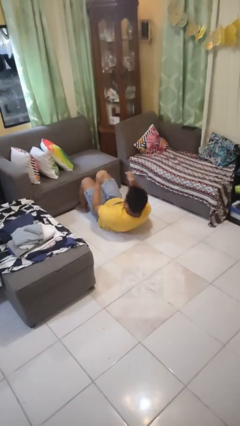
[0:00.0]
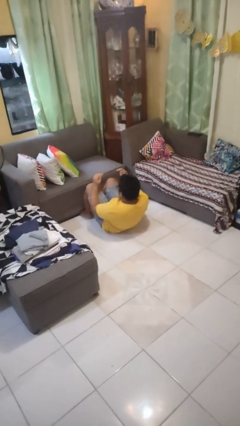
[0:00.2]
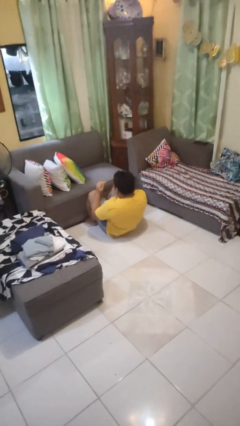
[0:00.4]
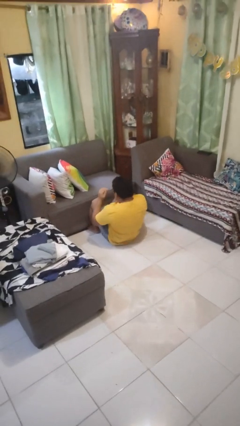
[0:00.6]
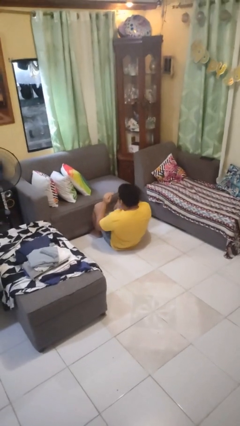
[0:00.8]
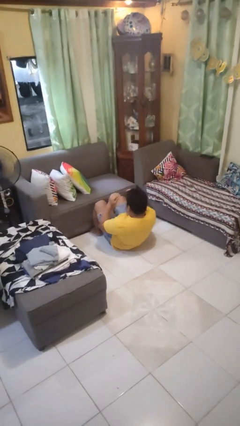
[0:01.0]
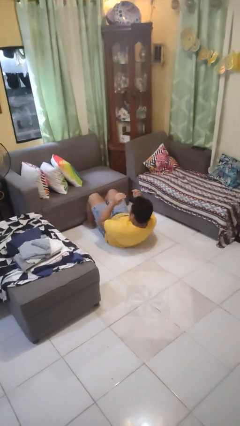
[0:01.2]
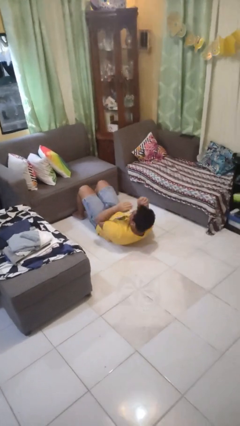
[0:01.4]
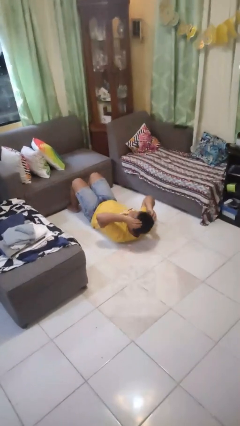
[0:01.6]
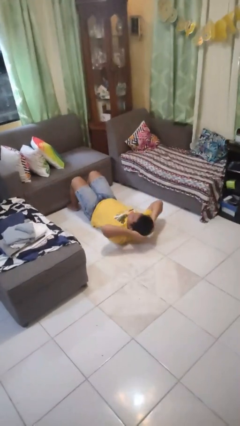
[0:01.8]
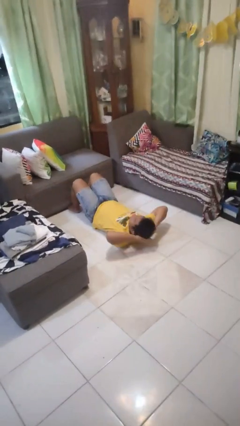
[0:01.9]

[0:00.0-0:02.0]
person exercises with situp

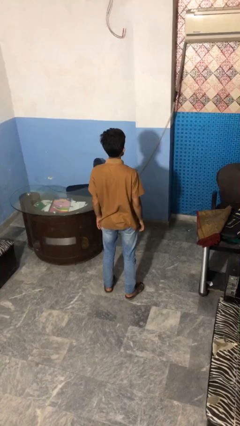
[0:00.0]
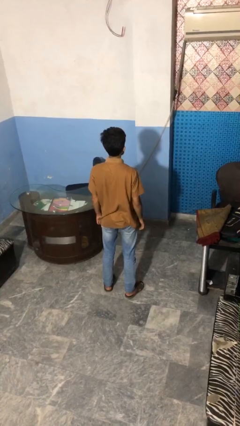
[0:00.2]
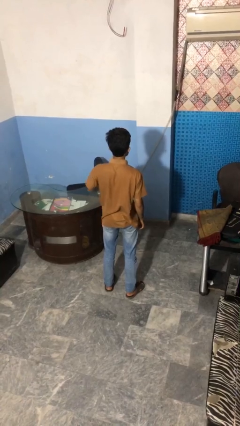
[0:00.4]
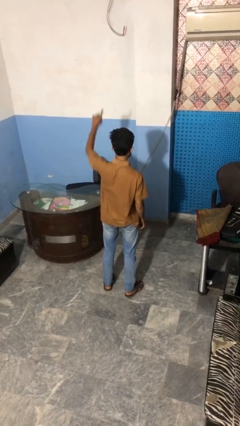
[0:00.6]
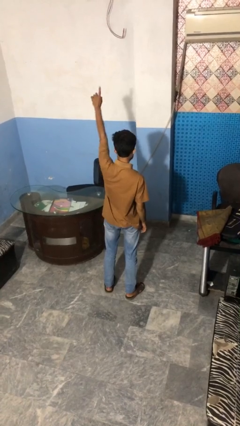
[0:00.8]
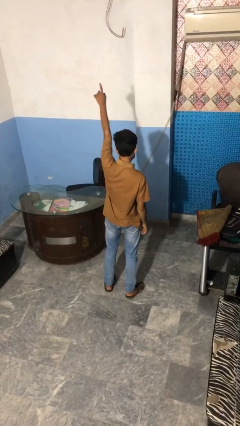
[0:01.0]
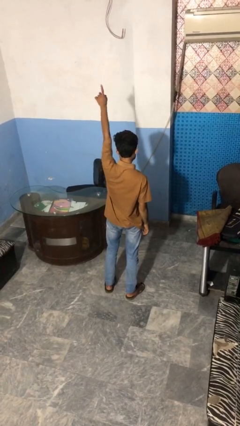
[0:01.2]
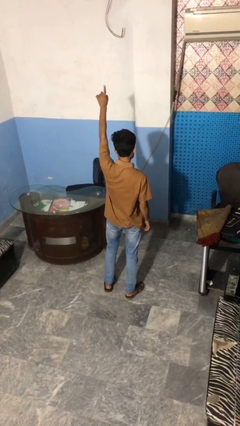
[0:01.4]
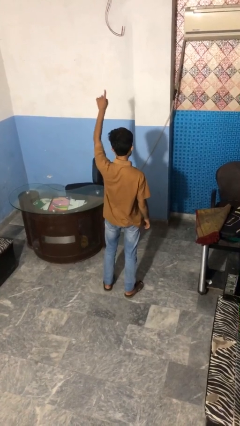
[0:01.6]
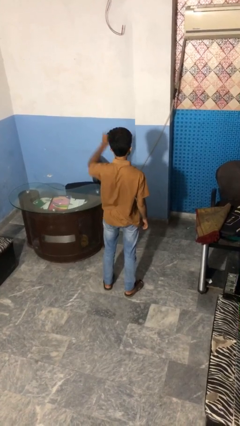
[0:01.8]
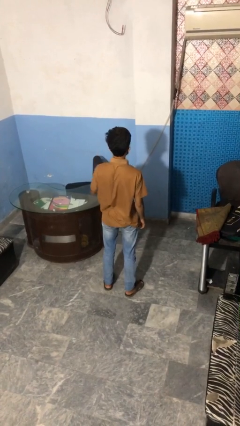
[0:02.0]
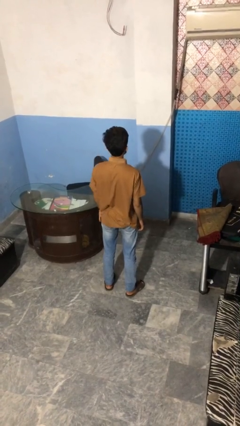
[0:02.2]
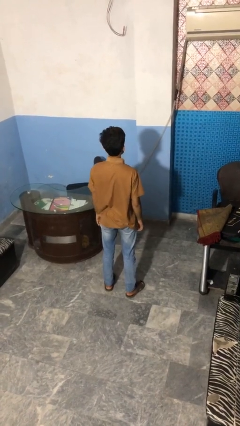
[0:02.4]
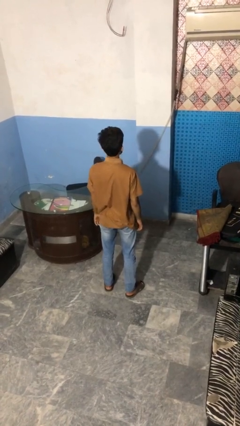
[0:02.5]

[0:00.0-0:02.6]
person gestures number one

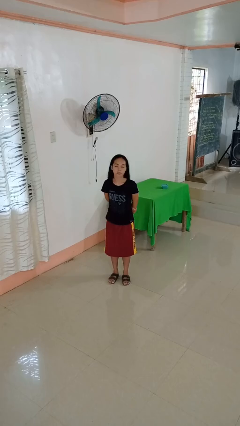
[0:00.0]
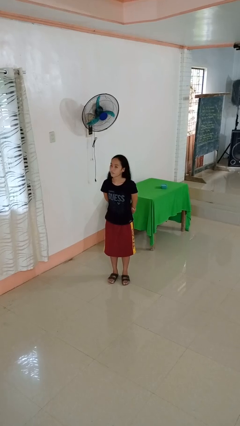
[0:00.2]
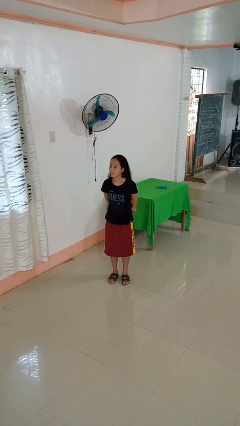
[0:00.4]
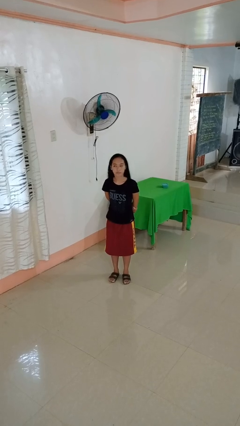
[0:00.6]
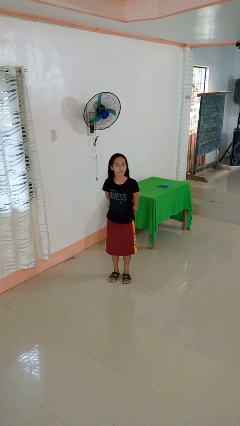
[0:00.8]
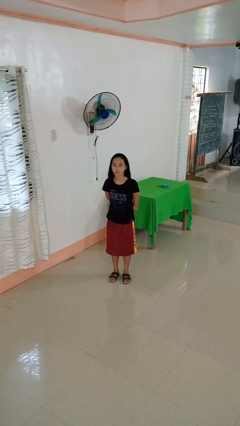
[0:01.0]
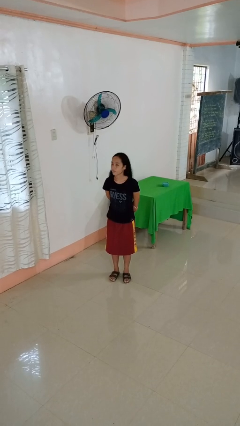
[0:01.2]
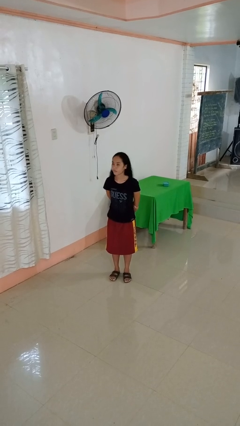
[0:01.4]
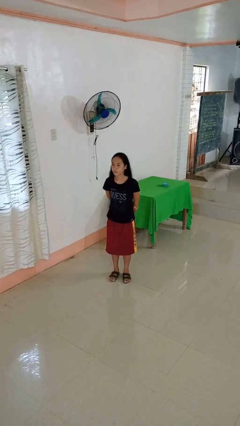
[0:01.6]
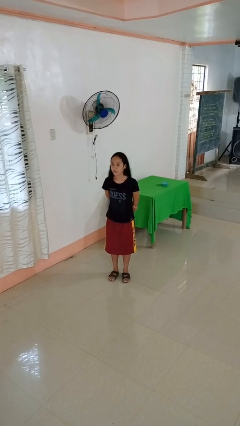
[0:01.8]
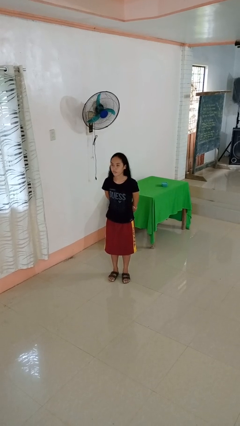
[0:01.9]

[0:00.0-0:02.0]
person shakes head

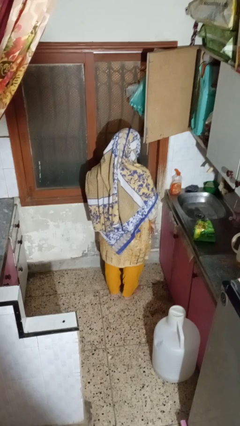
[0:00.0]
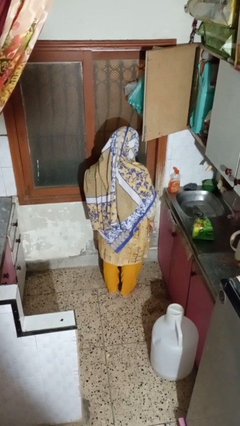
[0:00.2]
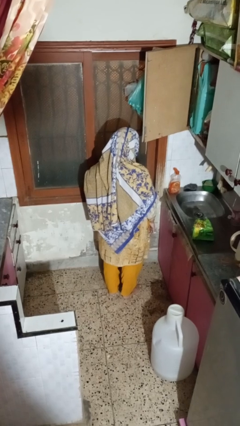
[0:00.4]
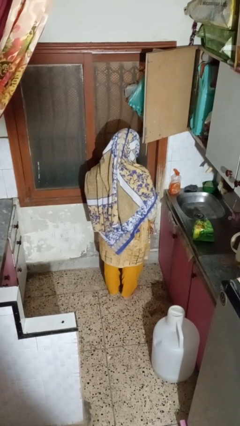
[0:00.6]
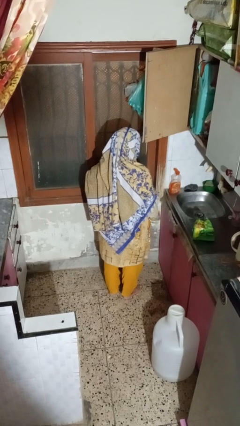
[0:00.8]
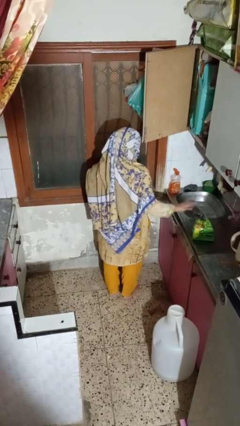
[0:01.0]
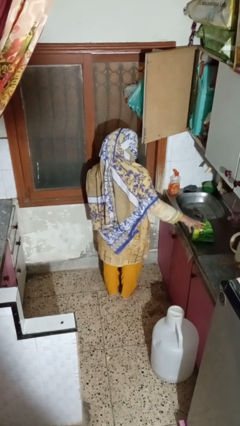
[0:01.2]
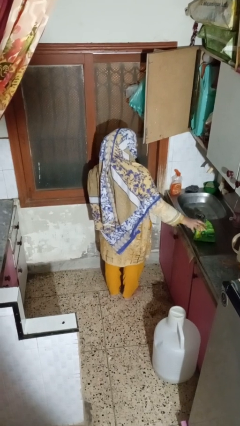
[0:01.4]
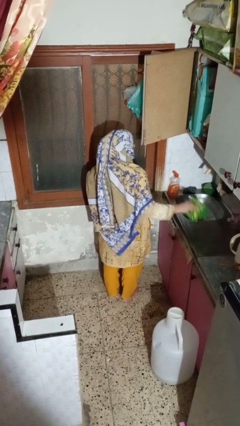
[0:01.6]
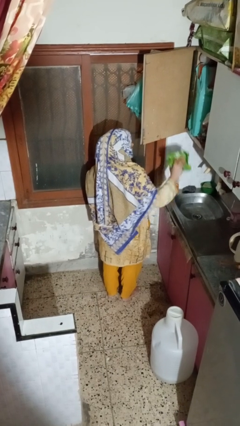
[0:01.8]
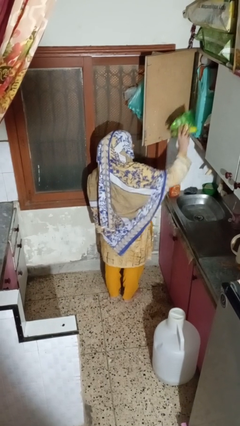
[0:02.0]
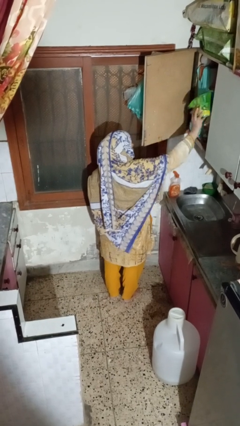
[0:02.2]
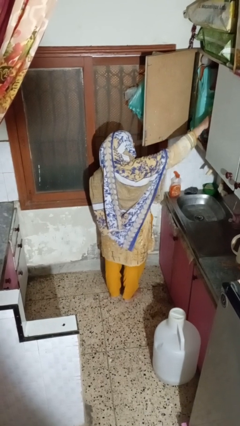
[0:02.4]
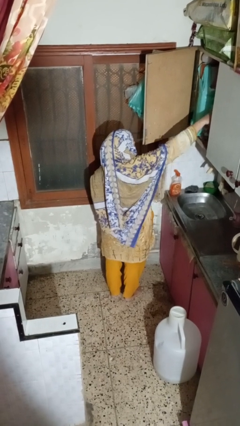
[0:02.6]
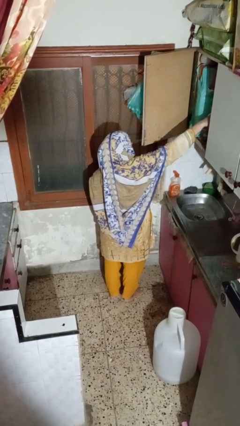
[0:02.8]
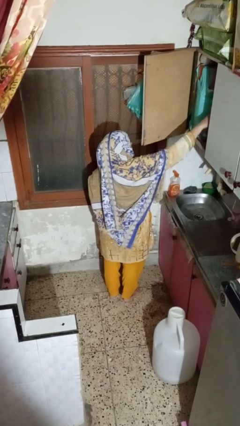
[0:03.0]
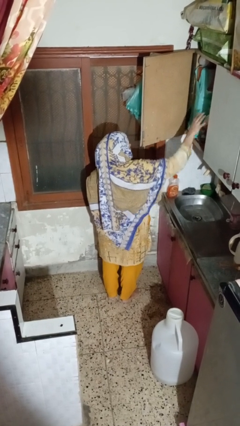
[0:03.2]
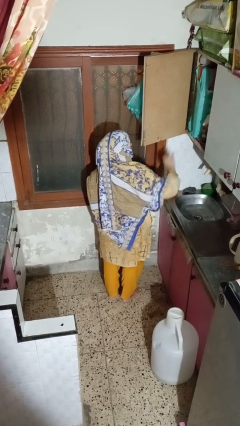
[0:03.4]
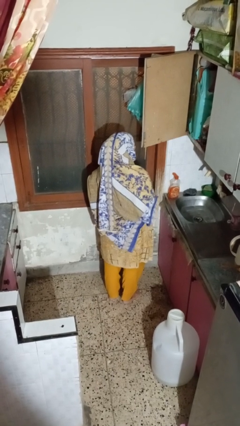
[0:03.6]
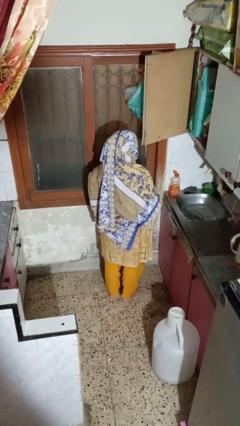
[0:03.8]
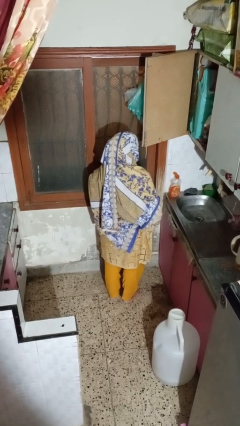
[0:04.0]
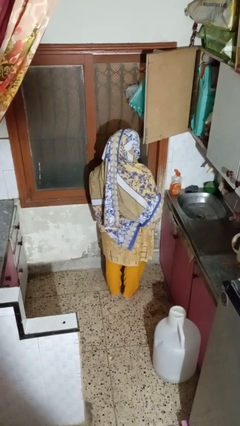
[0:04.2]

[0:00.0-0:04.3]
person puts object in cabinet

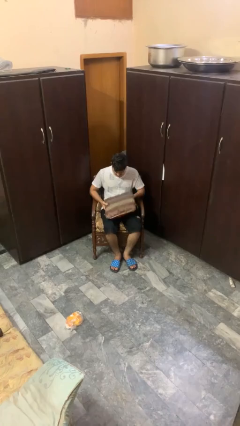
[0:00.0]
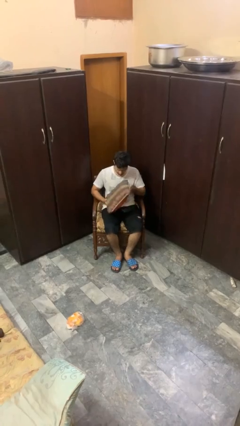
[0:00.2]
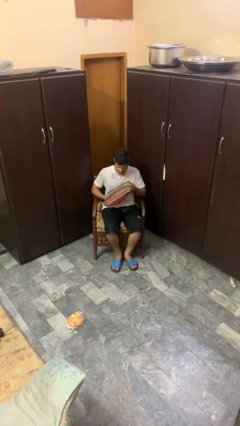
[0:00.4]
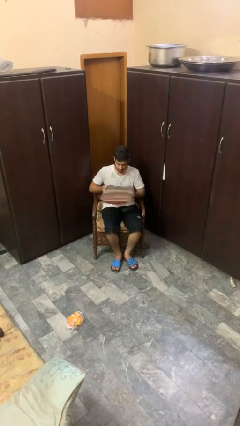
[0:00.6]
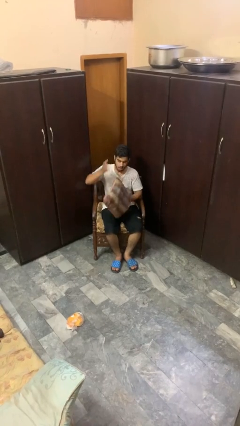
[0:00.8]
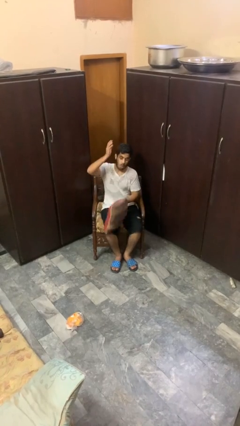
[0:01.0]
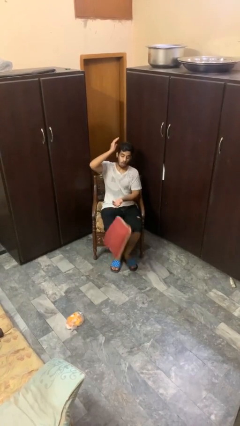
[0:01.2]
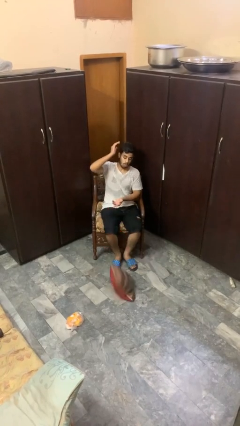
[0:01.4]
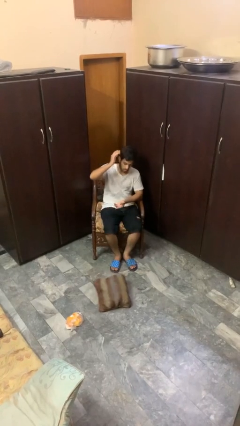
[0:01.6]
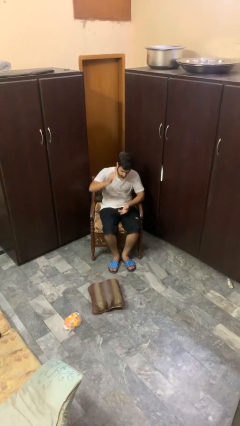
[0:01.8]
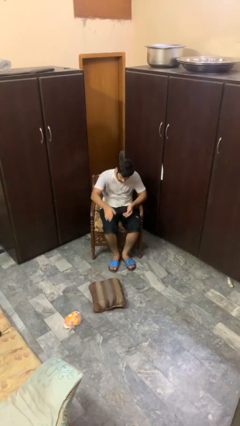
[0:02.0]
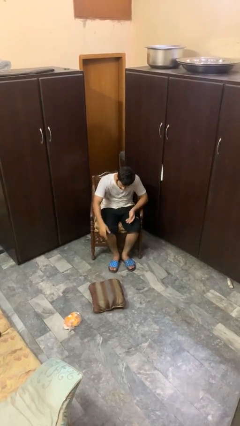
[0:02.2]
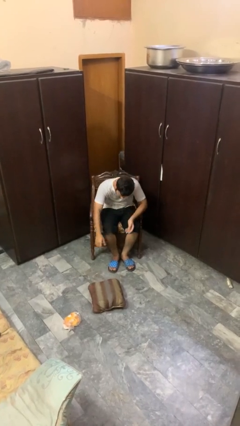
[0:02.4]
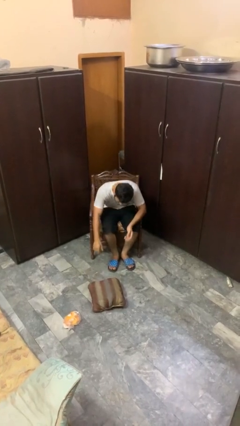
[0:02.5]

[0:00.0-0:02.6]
person drops object

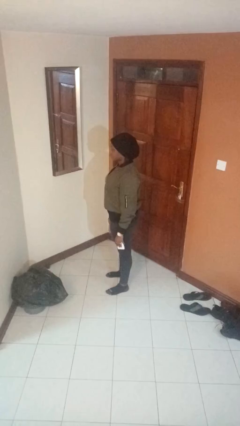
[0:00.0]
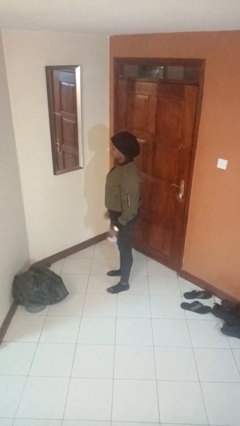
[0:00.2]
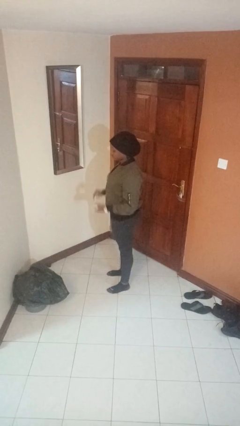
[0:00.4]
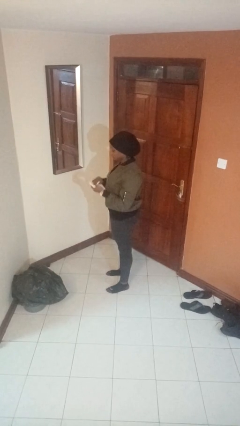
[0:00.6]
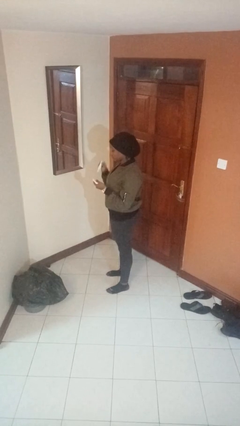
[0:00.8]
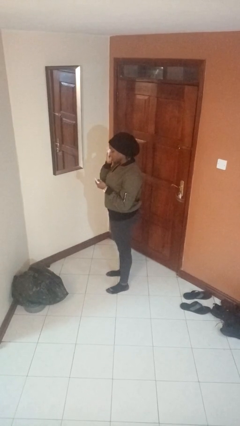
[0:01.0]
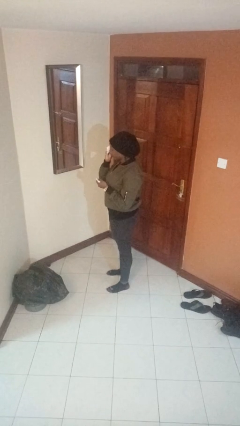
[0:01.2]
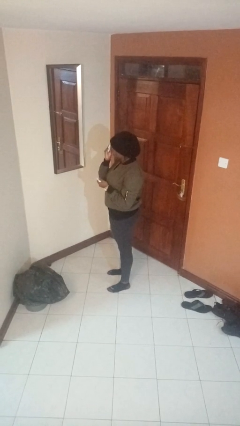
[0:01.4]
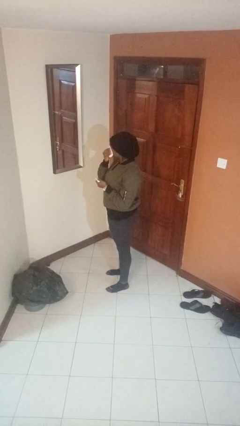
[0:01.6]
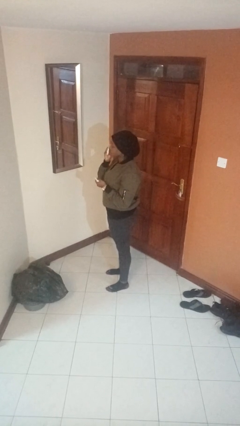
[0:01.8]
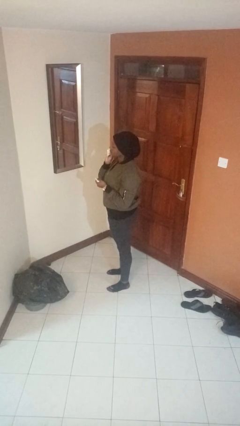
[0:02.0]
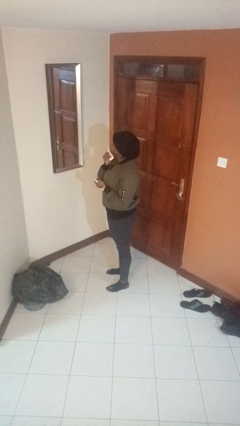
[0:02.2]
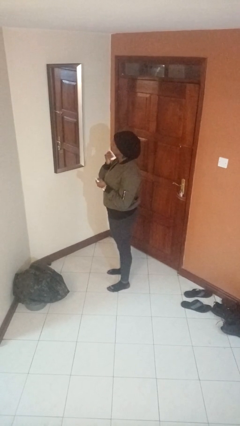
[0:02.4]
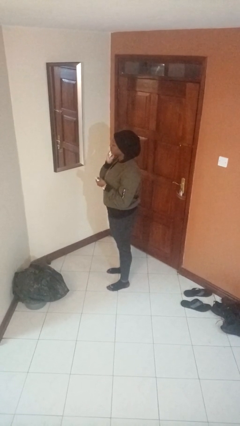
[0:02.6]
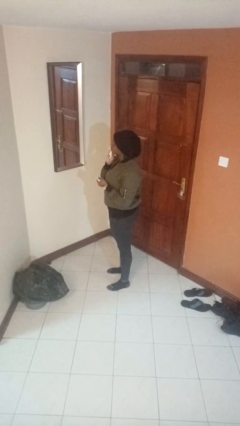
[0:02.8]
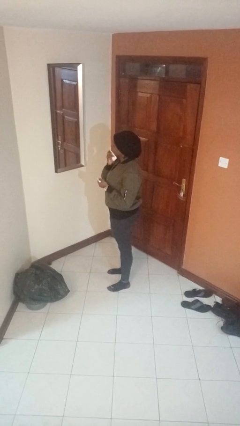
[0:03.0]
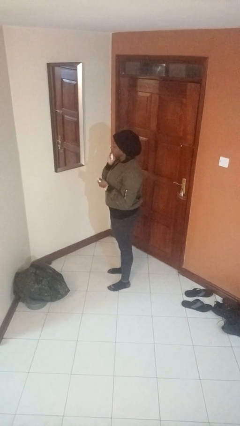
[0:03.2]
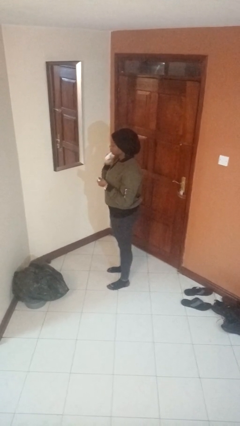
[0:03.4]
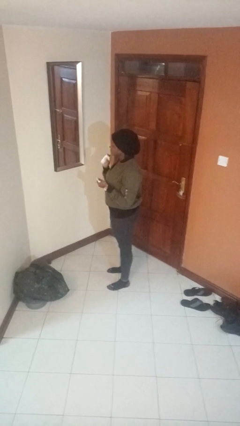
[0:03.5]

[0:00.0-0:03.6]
person applies foundation makeup

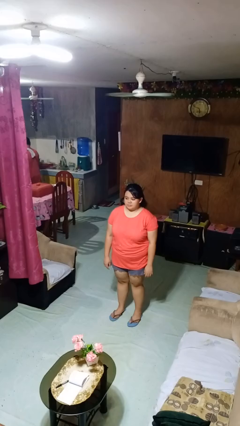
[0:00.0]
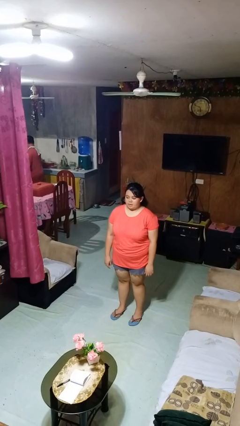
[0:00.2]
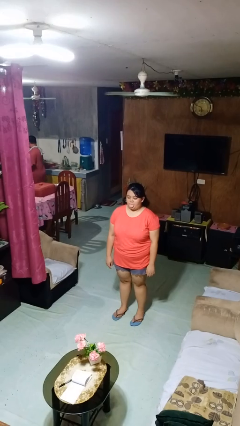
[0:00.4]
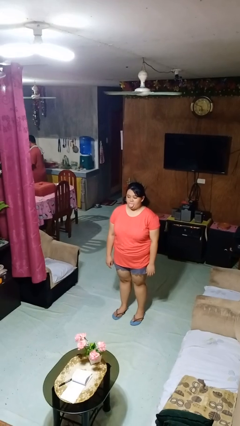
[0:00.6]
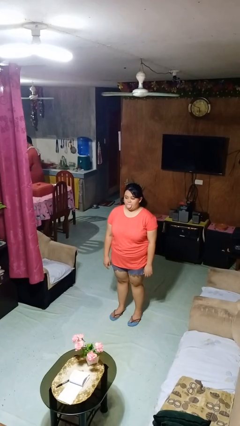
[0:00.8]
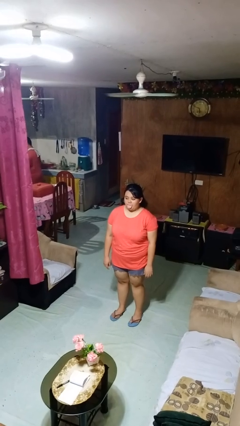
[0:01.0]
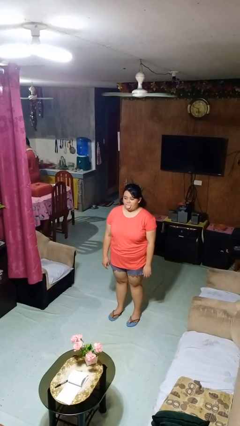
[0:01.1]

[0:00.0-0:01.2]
person sticks out tongue
